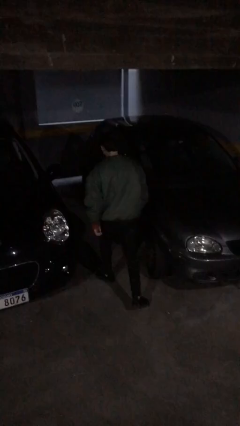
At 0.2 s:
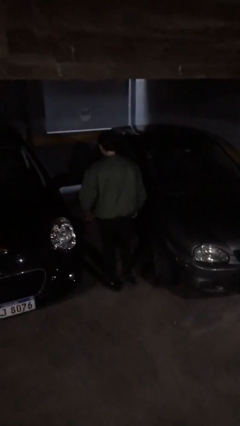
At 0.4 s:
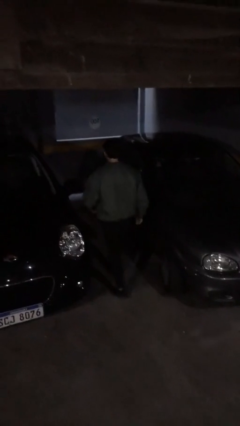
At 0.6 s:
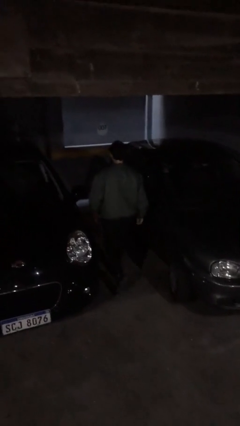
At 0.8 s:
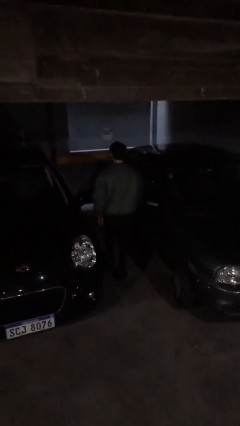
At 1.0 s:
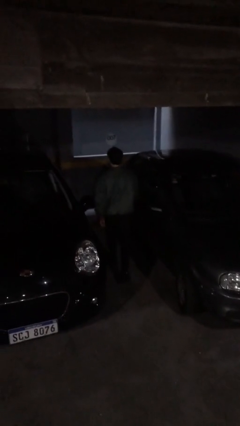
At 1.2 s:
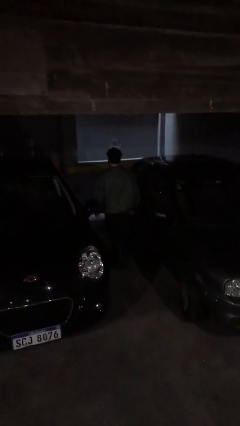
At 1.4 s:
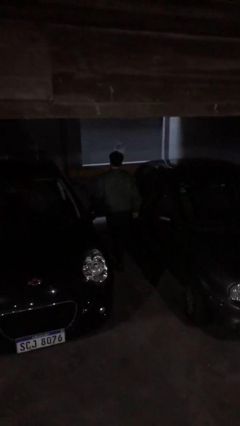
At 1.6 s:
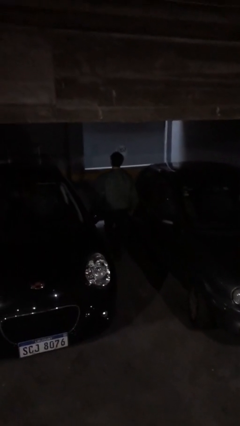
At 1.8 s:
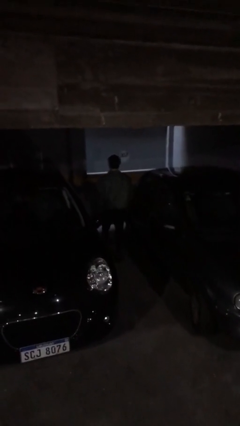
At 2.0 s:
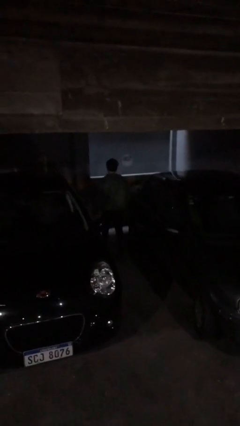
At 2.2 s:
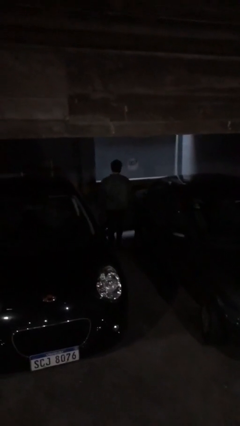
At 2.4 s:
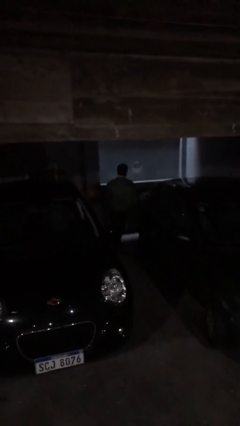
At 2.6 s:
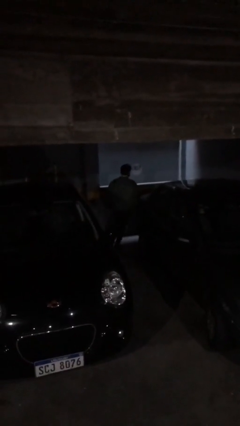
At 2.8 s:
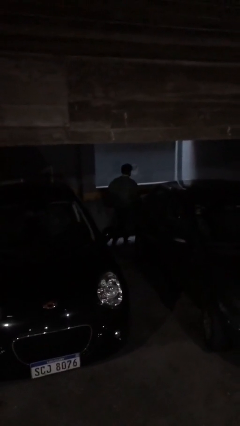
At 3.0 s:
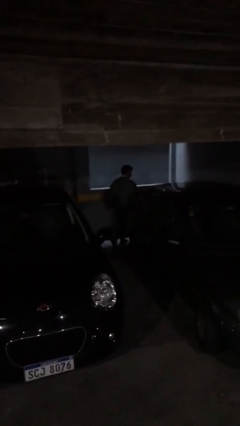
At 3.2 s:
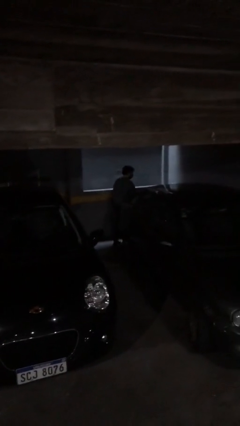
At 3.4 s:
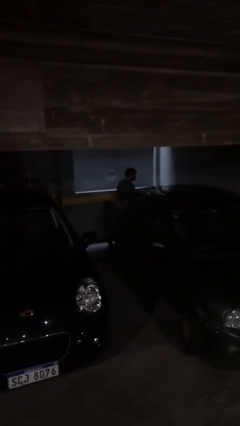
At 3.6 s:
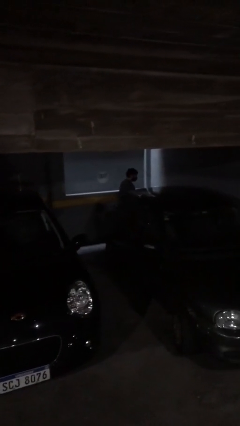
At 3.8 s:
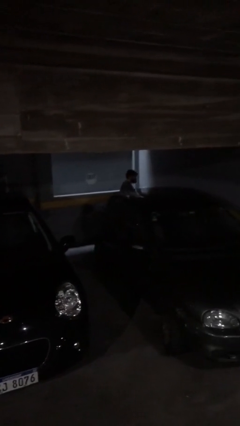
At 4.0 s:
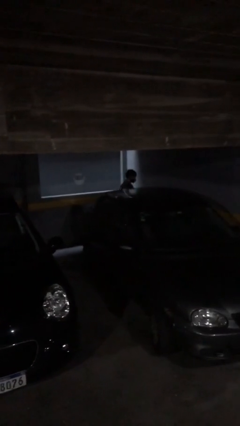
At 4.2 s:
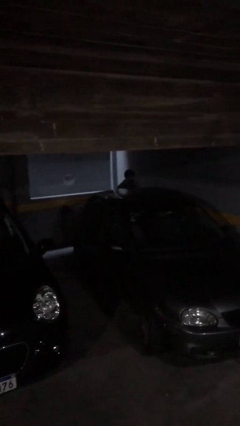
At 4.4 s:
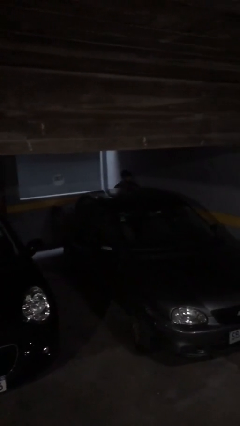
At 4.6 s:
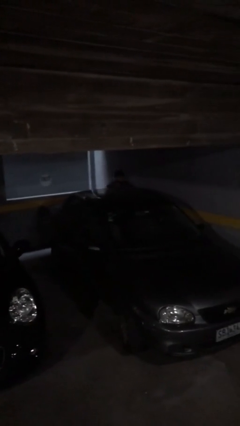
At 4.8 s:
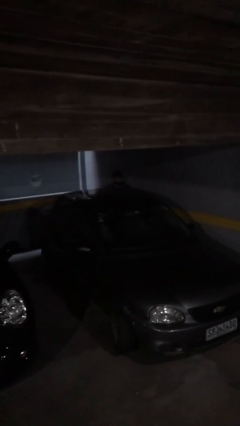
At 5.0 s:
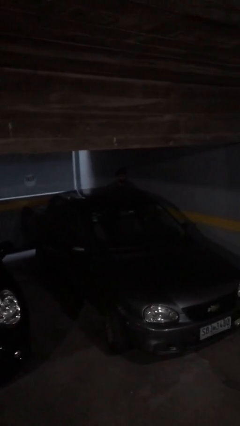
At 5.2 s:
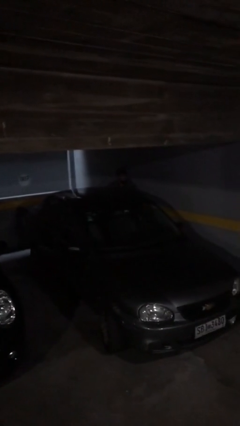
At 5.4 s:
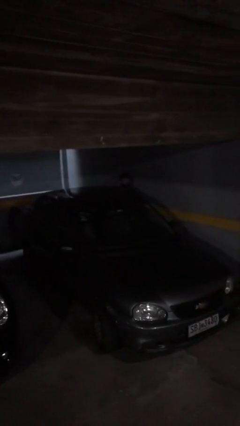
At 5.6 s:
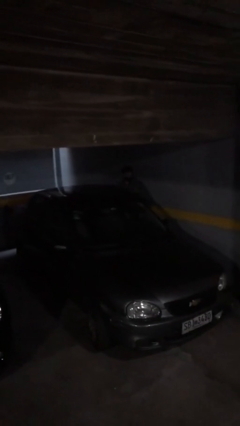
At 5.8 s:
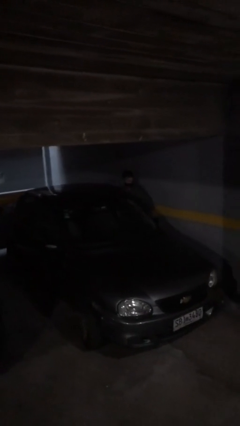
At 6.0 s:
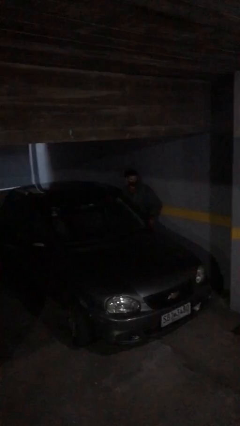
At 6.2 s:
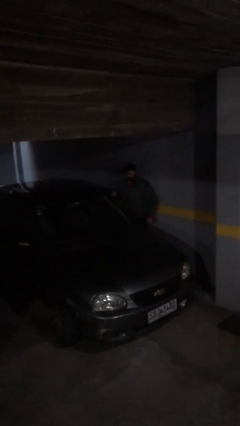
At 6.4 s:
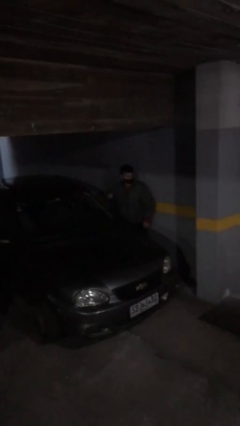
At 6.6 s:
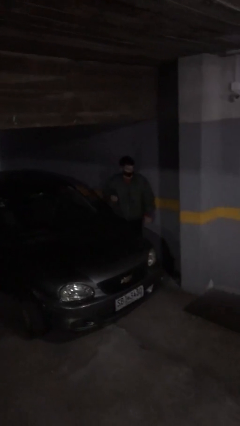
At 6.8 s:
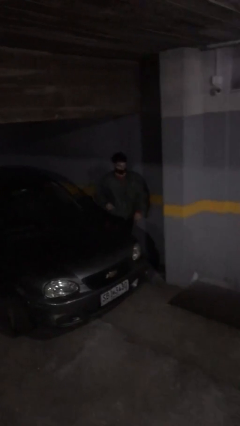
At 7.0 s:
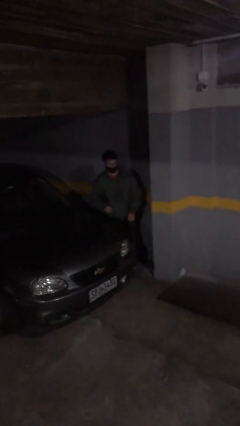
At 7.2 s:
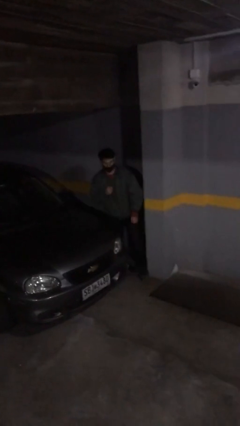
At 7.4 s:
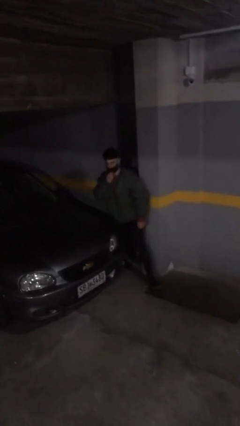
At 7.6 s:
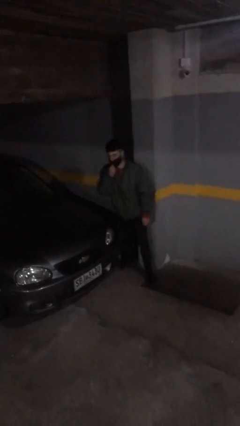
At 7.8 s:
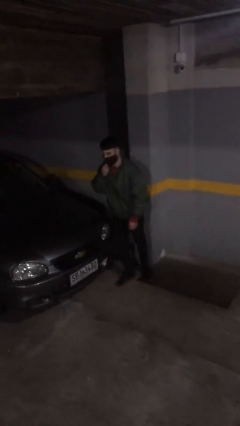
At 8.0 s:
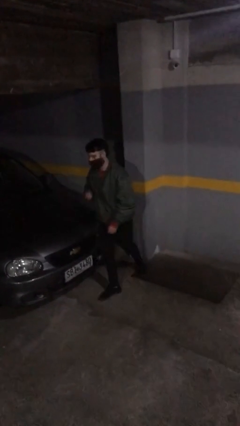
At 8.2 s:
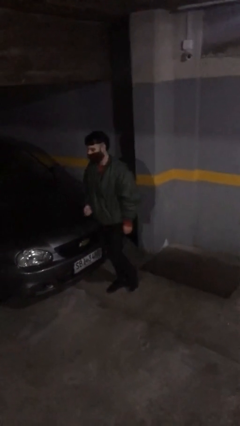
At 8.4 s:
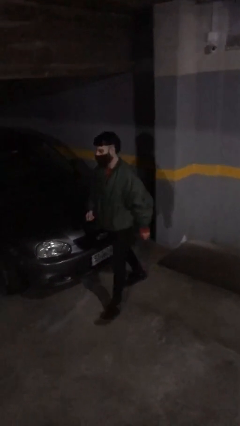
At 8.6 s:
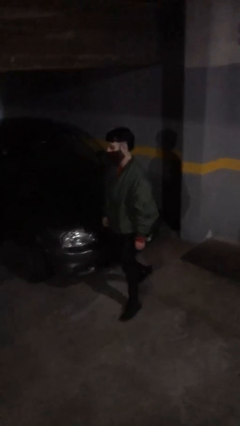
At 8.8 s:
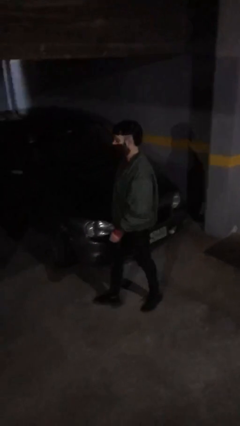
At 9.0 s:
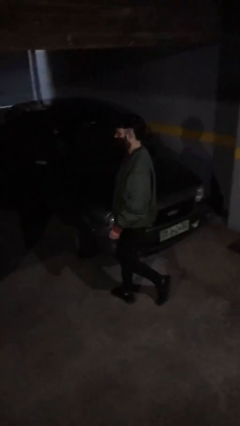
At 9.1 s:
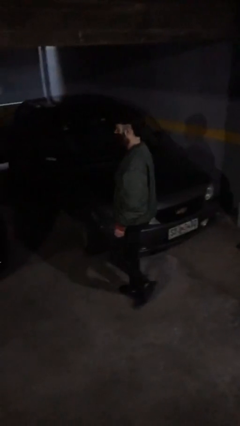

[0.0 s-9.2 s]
person walks around car

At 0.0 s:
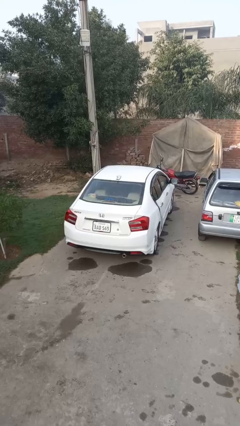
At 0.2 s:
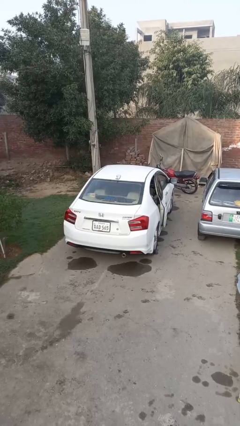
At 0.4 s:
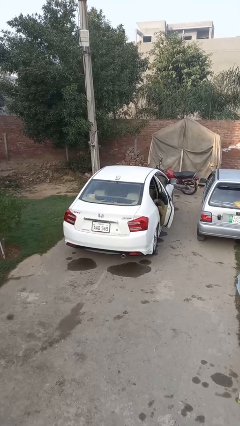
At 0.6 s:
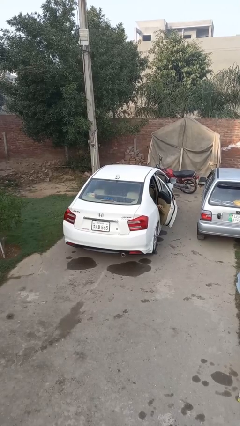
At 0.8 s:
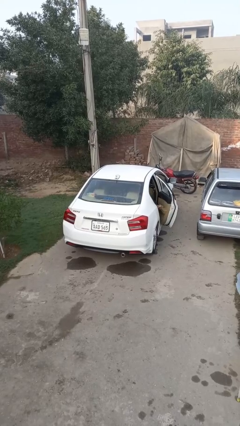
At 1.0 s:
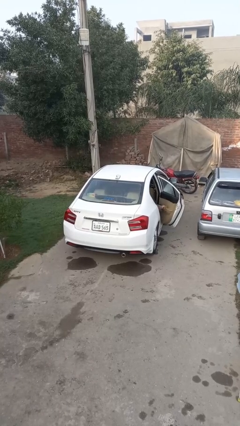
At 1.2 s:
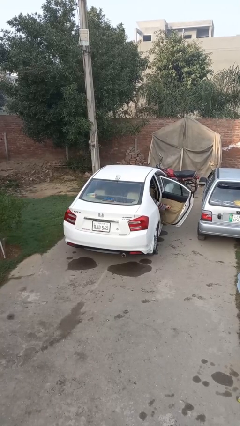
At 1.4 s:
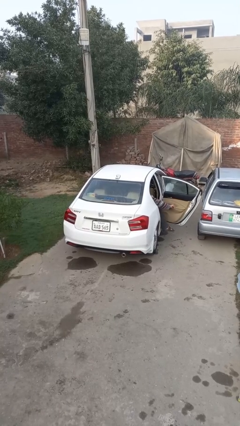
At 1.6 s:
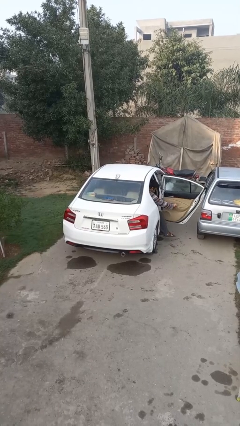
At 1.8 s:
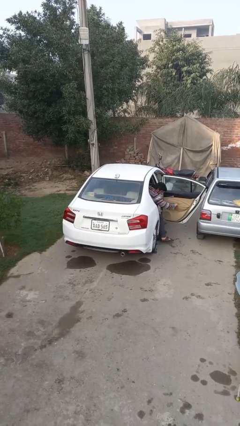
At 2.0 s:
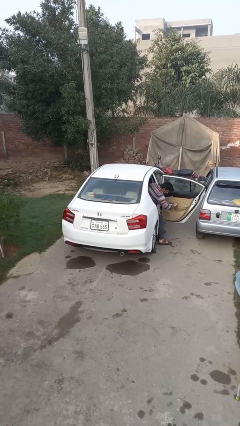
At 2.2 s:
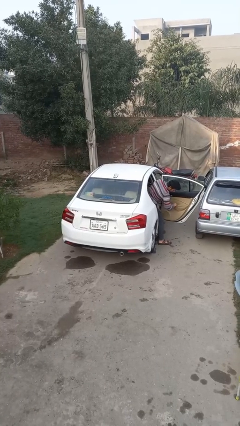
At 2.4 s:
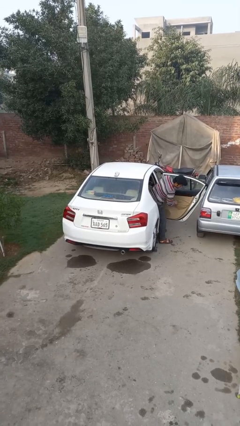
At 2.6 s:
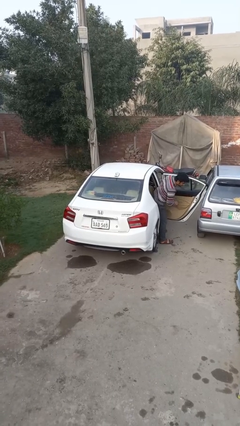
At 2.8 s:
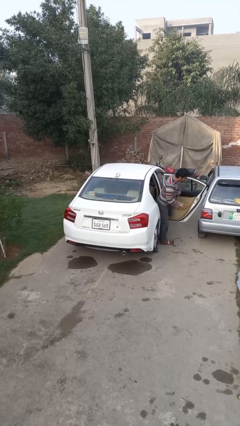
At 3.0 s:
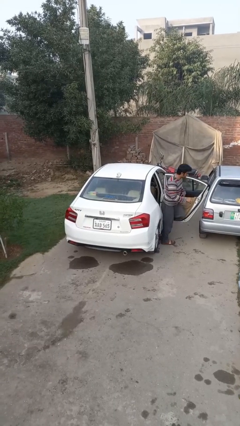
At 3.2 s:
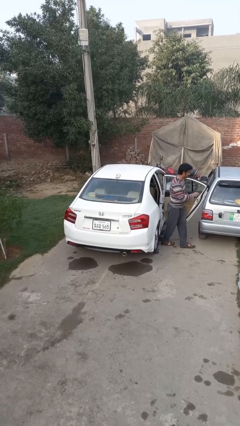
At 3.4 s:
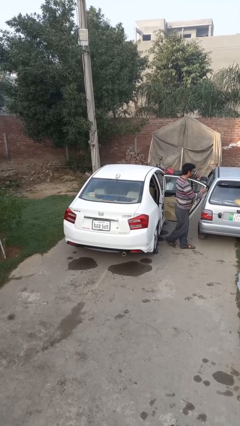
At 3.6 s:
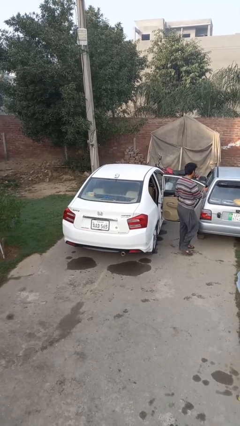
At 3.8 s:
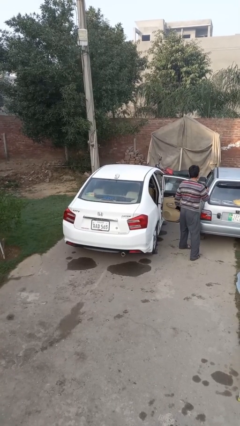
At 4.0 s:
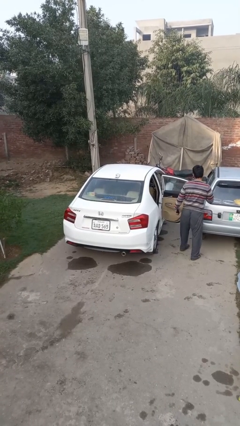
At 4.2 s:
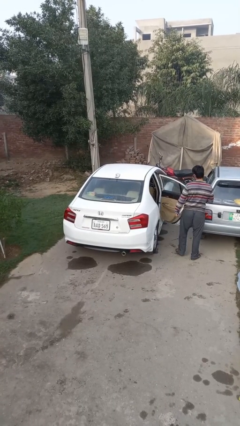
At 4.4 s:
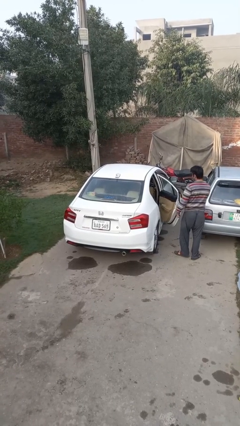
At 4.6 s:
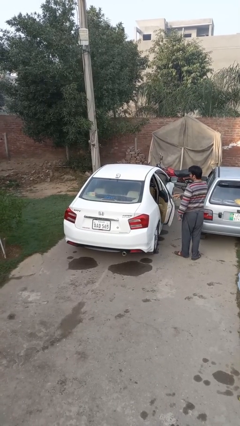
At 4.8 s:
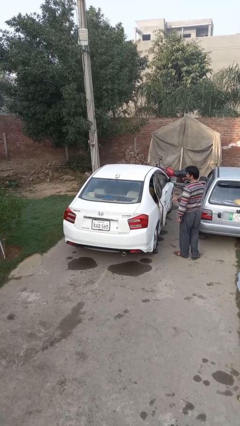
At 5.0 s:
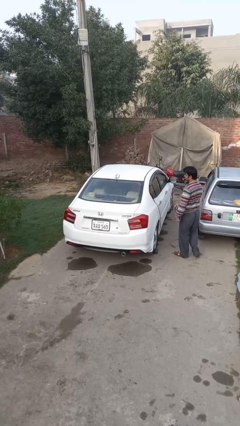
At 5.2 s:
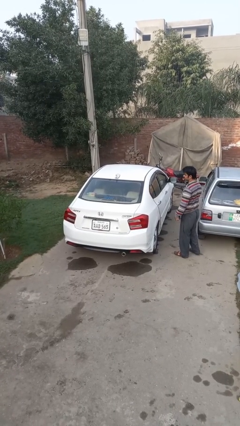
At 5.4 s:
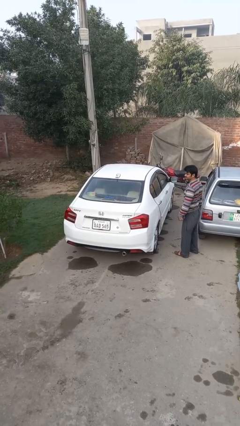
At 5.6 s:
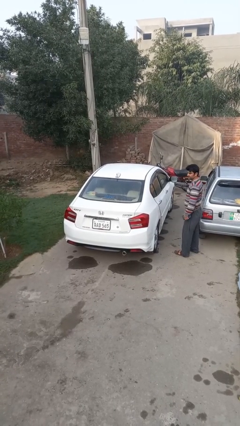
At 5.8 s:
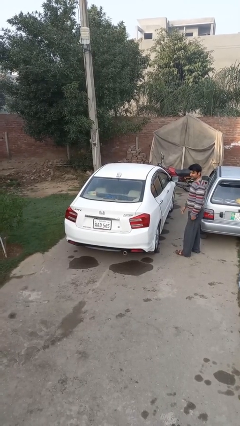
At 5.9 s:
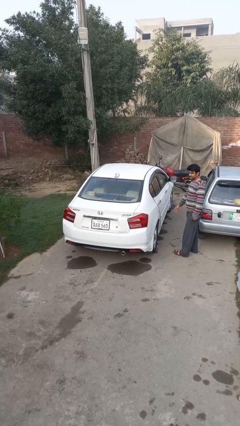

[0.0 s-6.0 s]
car drops off person

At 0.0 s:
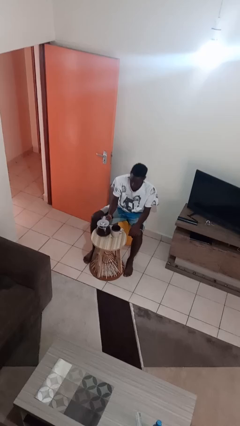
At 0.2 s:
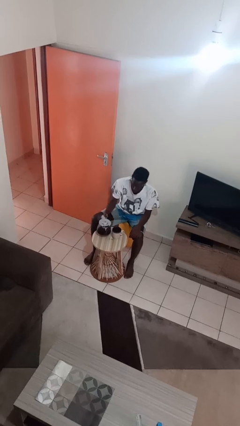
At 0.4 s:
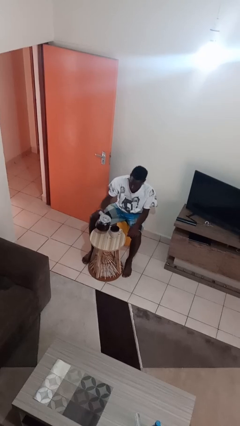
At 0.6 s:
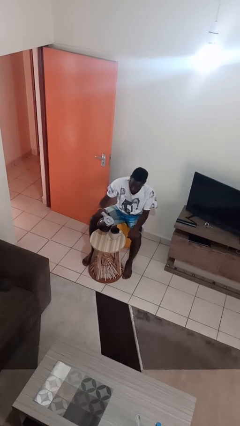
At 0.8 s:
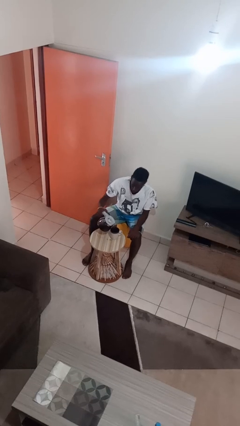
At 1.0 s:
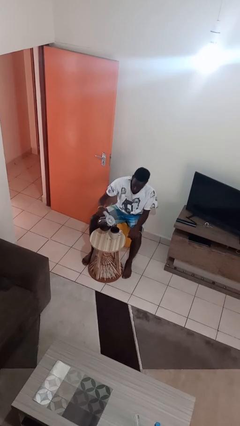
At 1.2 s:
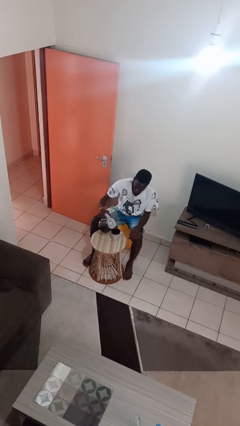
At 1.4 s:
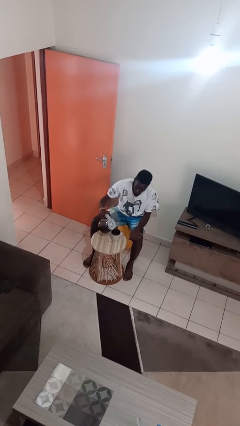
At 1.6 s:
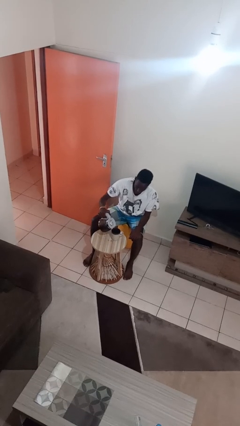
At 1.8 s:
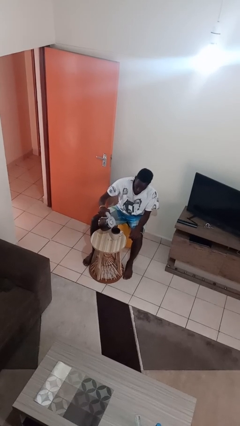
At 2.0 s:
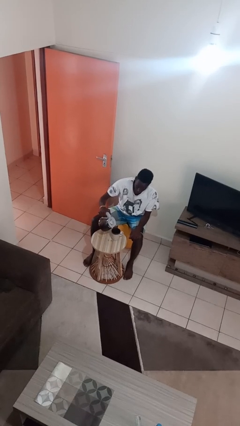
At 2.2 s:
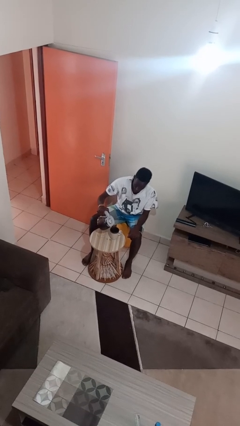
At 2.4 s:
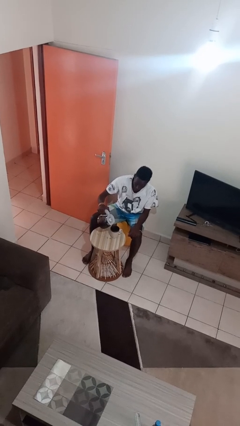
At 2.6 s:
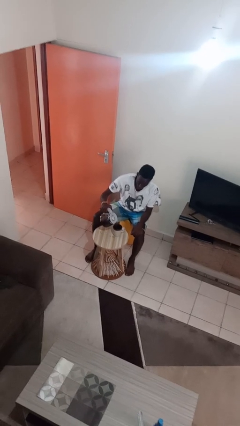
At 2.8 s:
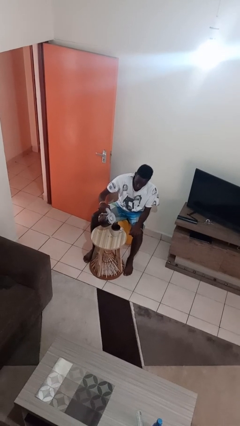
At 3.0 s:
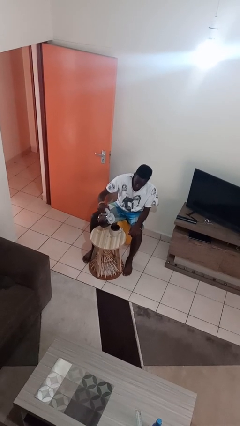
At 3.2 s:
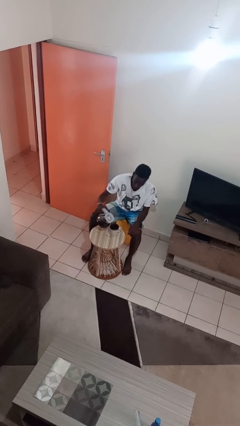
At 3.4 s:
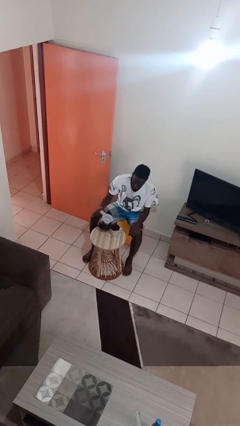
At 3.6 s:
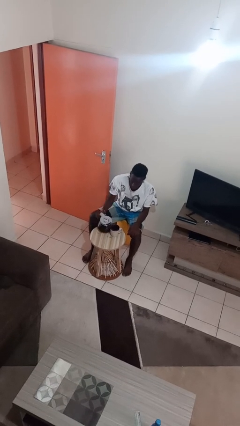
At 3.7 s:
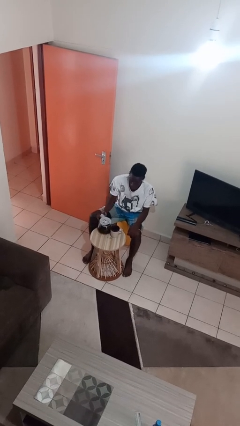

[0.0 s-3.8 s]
person pours coffee into mug
